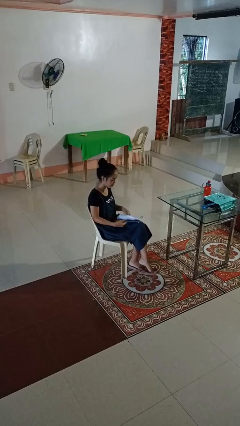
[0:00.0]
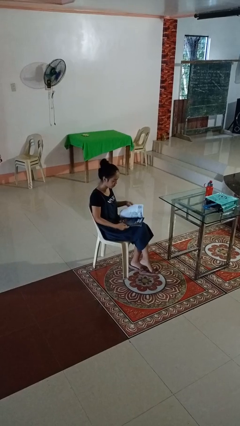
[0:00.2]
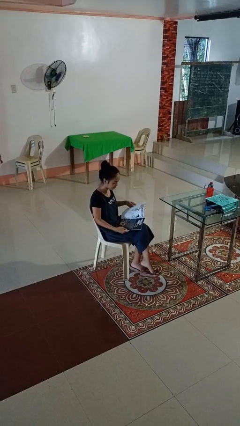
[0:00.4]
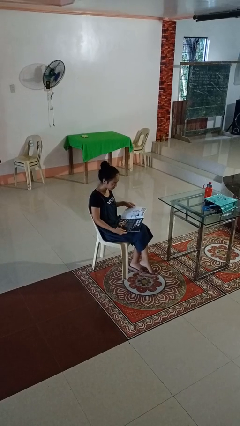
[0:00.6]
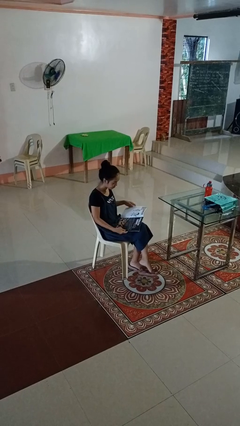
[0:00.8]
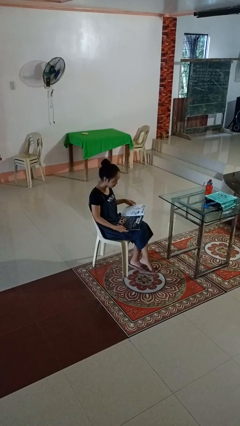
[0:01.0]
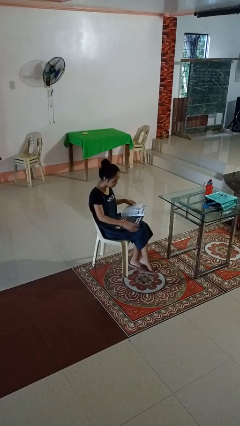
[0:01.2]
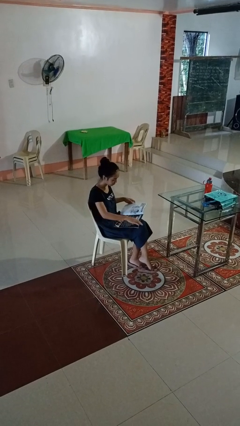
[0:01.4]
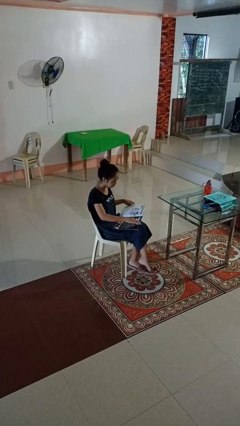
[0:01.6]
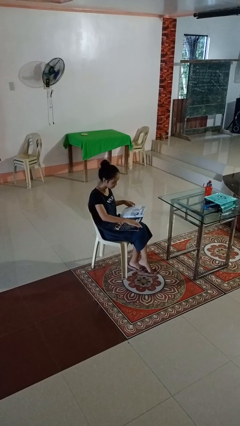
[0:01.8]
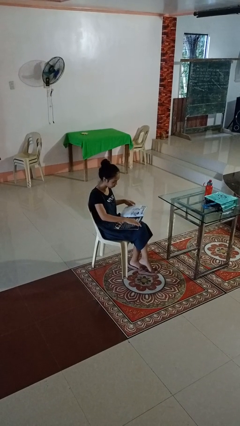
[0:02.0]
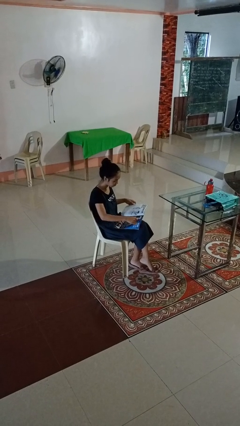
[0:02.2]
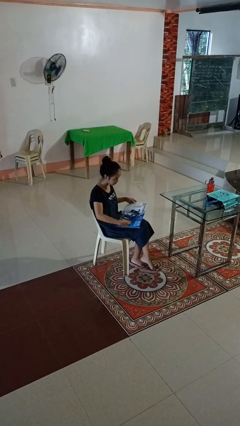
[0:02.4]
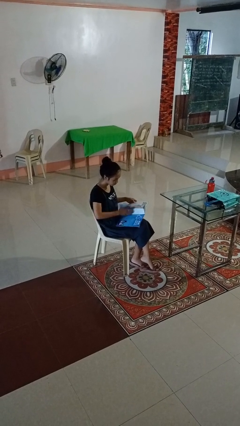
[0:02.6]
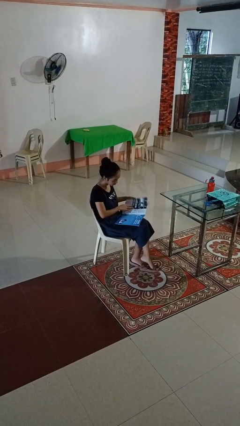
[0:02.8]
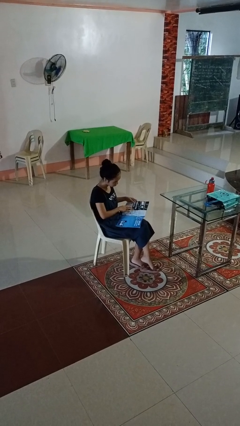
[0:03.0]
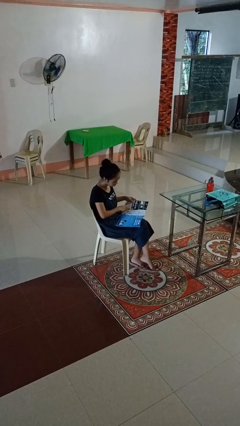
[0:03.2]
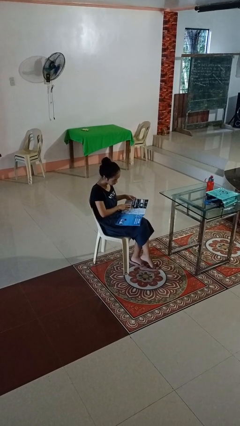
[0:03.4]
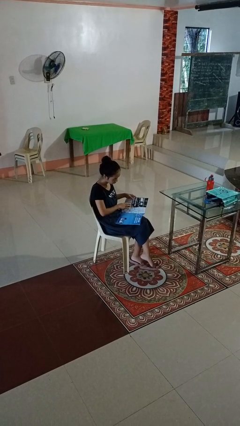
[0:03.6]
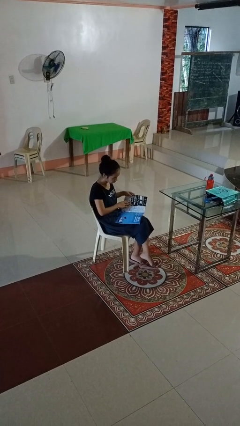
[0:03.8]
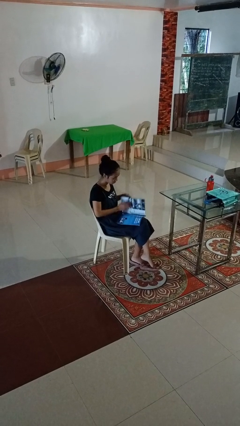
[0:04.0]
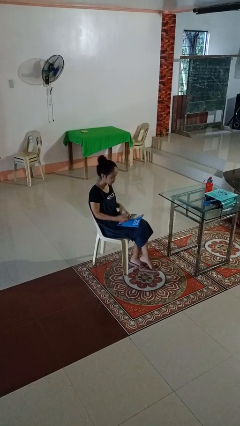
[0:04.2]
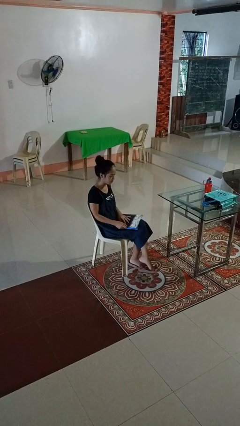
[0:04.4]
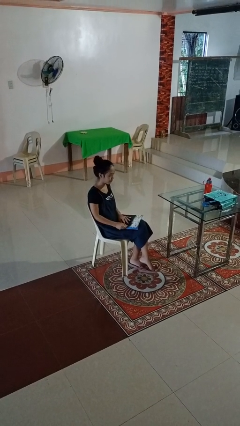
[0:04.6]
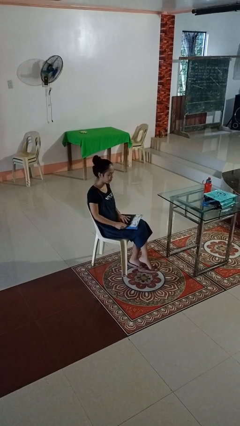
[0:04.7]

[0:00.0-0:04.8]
person reads magazine

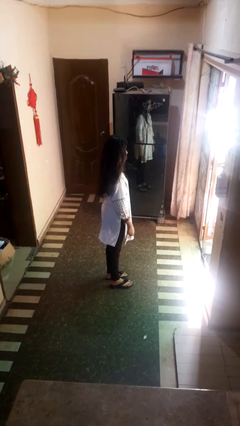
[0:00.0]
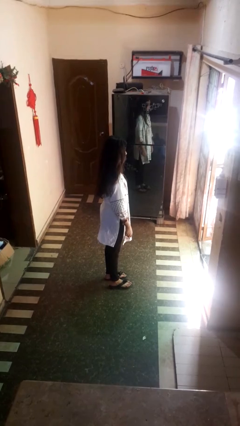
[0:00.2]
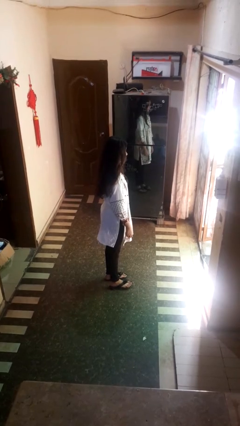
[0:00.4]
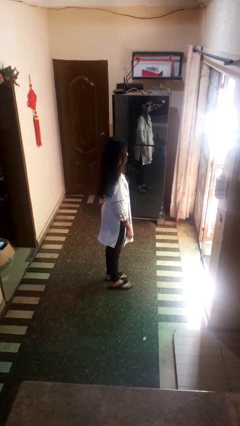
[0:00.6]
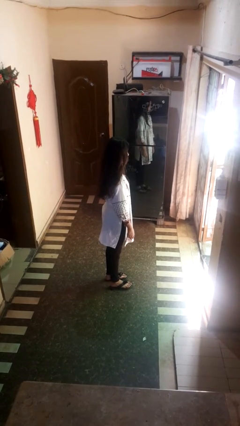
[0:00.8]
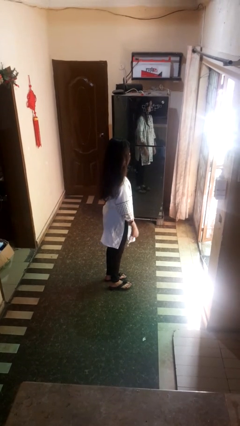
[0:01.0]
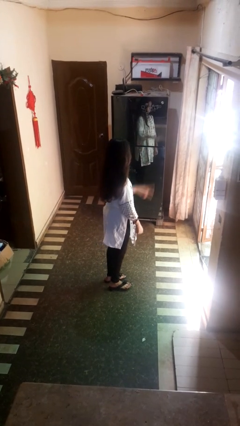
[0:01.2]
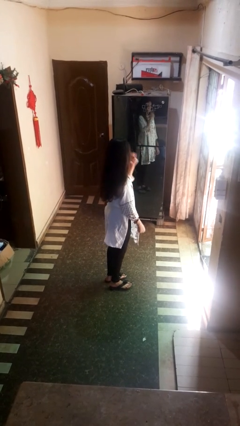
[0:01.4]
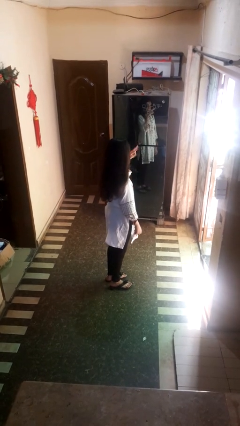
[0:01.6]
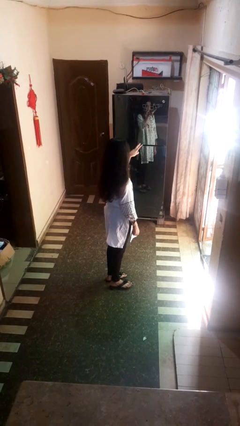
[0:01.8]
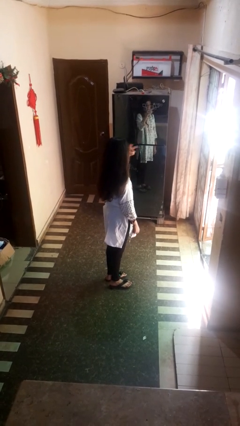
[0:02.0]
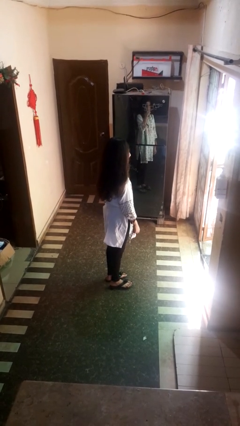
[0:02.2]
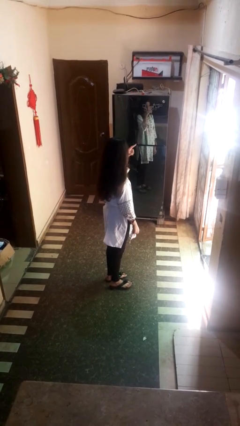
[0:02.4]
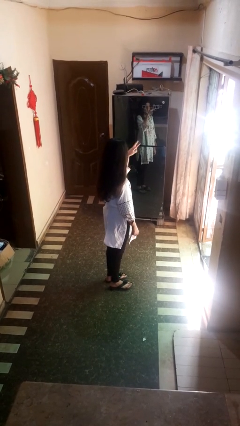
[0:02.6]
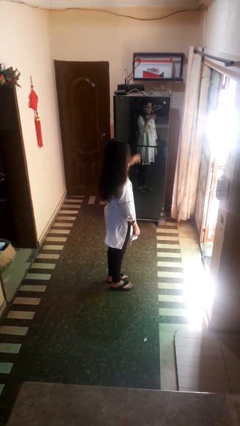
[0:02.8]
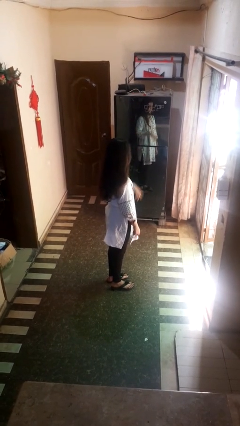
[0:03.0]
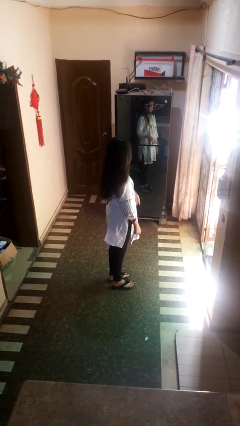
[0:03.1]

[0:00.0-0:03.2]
person gestures watch closely

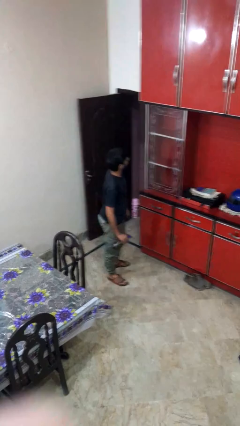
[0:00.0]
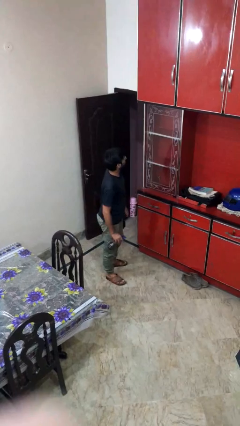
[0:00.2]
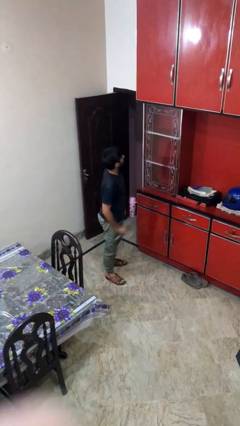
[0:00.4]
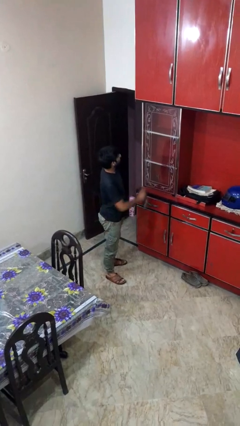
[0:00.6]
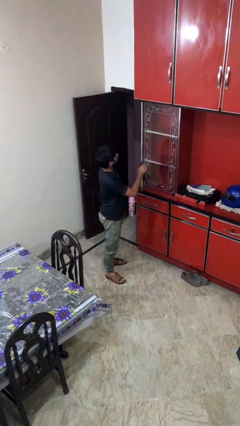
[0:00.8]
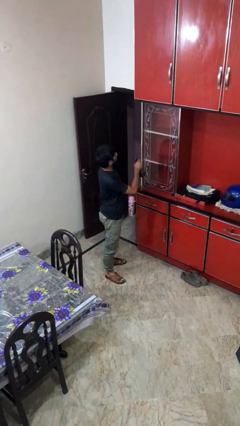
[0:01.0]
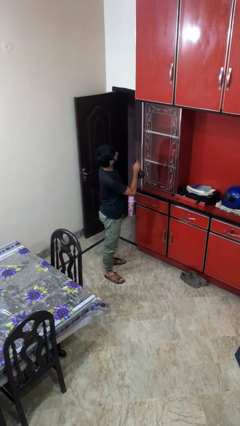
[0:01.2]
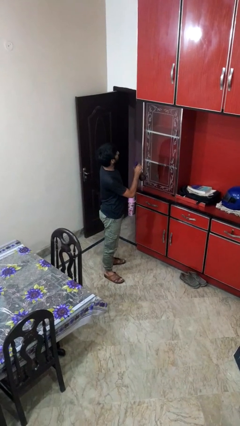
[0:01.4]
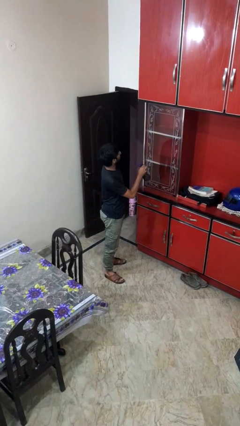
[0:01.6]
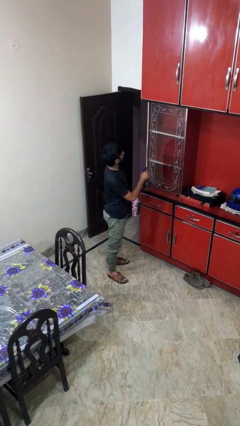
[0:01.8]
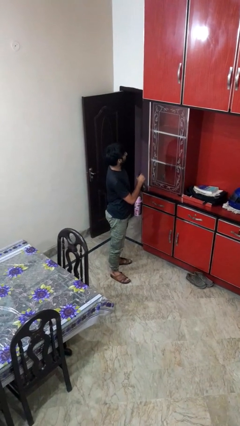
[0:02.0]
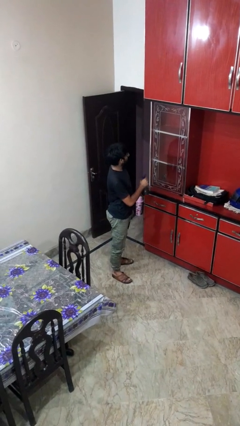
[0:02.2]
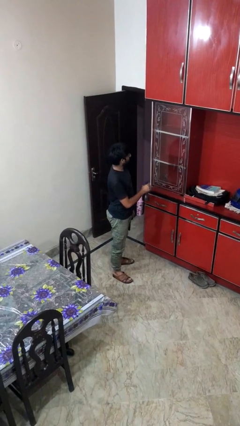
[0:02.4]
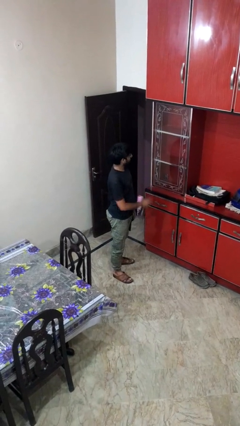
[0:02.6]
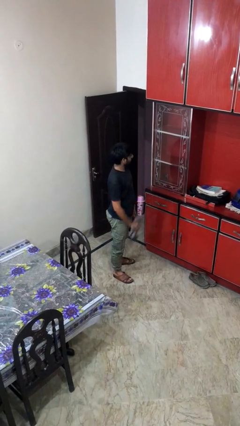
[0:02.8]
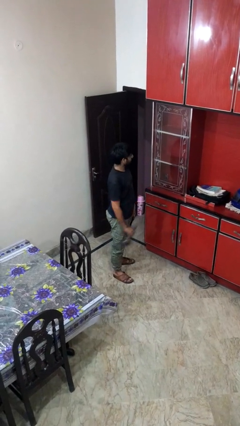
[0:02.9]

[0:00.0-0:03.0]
person sprays from bottle

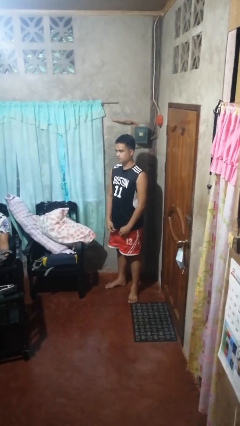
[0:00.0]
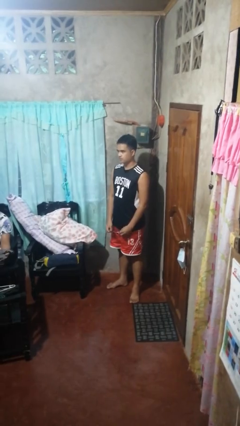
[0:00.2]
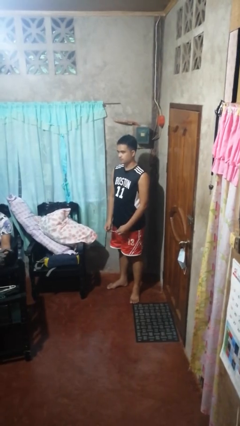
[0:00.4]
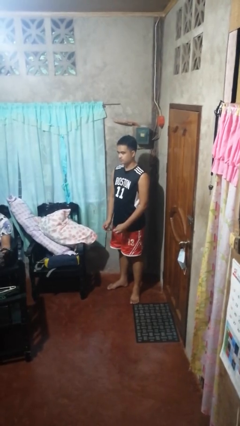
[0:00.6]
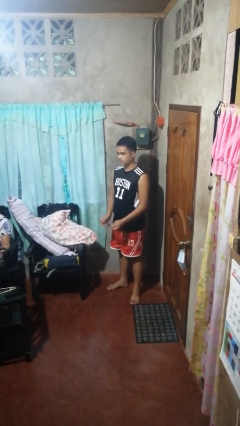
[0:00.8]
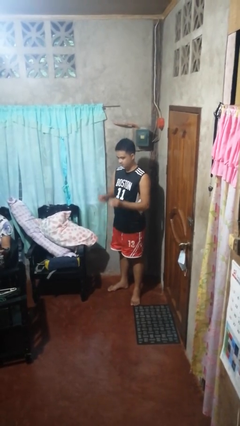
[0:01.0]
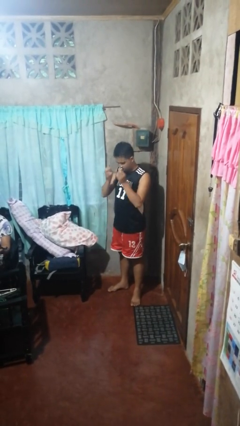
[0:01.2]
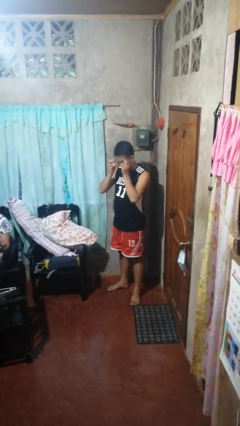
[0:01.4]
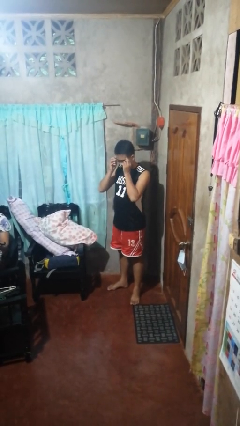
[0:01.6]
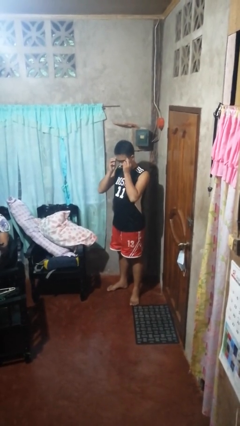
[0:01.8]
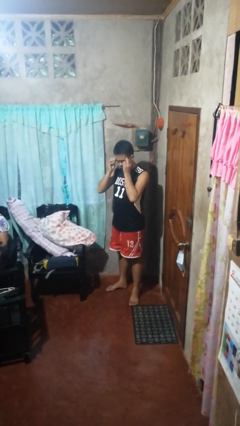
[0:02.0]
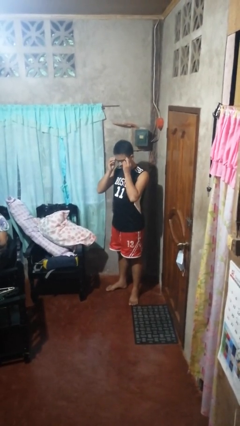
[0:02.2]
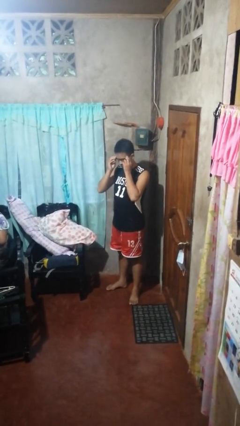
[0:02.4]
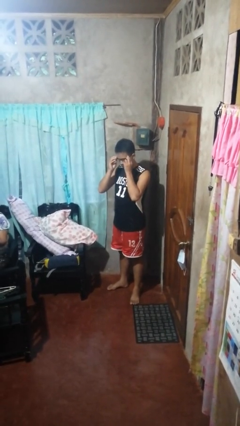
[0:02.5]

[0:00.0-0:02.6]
person puts on glasses

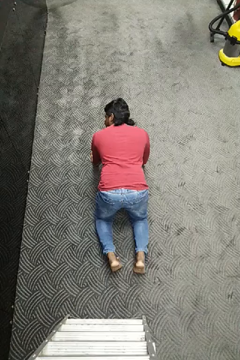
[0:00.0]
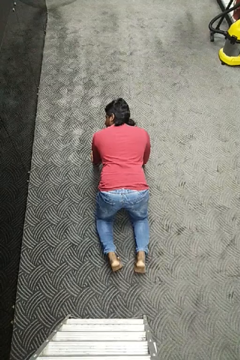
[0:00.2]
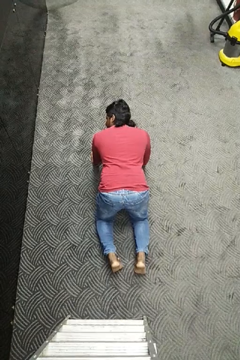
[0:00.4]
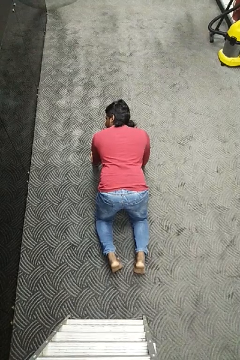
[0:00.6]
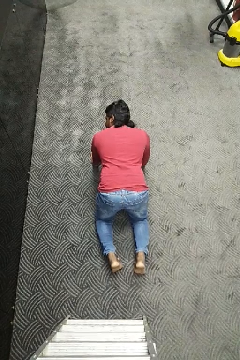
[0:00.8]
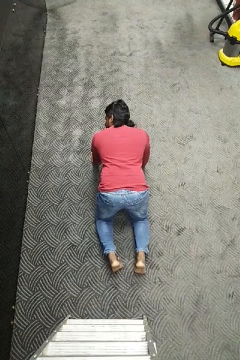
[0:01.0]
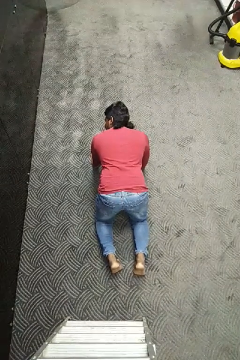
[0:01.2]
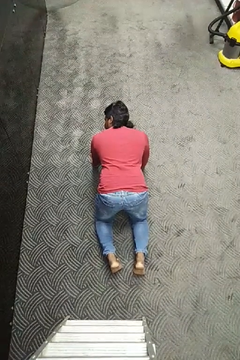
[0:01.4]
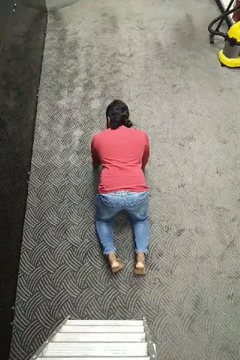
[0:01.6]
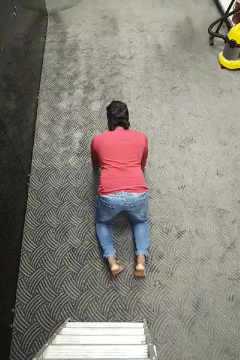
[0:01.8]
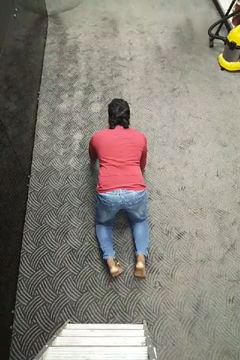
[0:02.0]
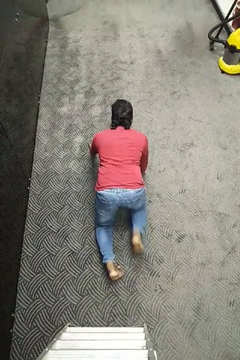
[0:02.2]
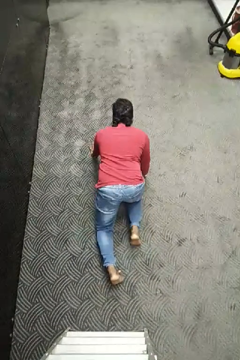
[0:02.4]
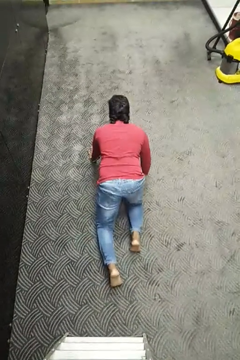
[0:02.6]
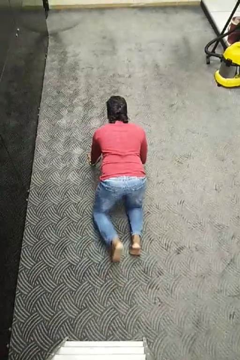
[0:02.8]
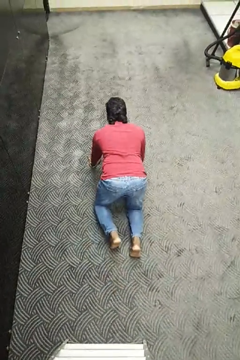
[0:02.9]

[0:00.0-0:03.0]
person crawls

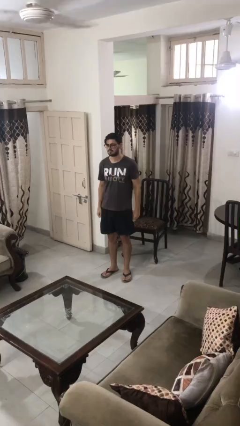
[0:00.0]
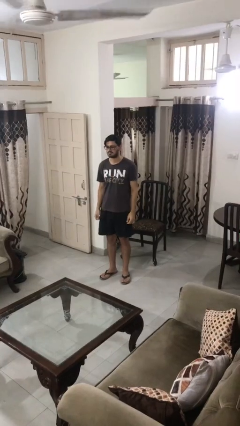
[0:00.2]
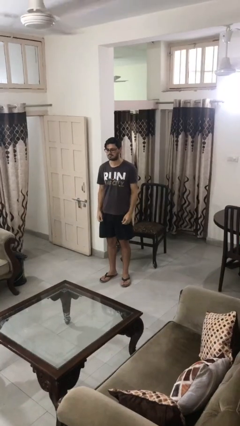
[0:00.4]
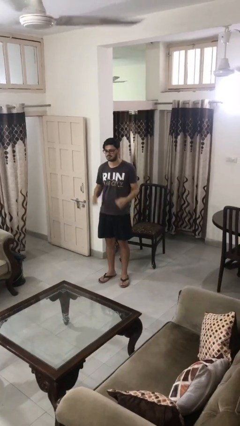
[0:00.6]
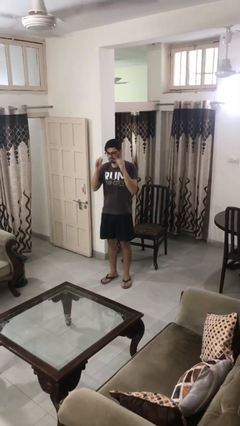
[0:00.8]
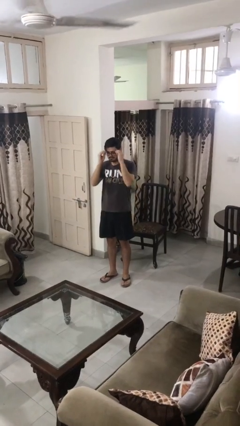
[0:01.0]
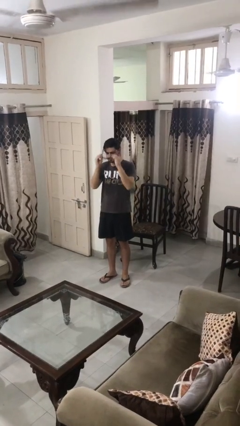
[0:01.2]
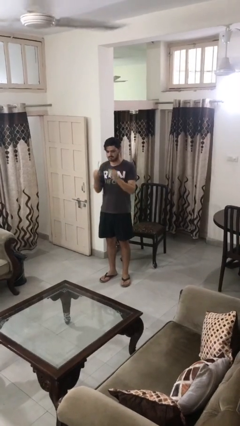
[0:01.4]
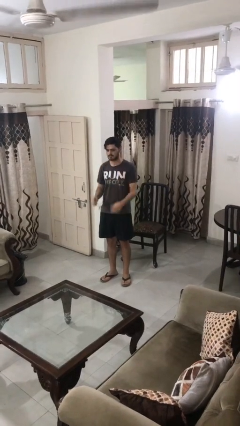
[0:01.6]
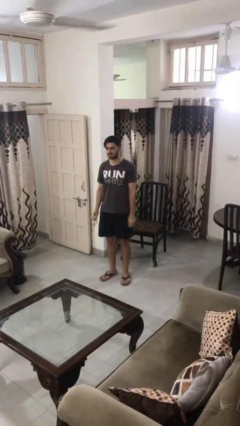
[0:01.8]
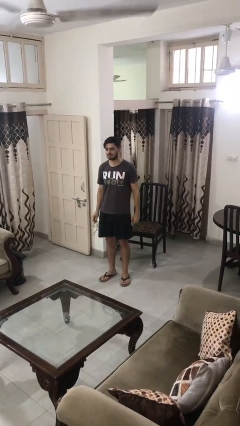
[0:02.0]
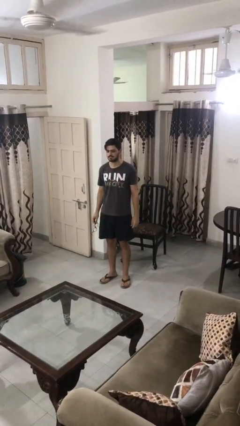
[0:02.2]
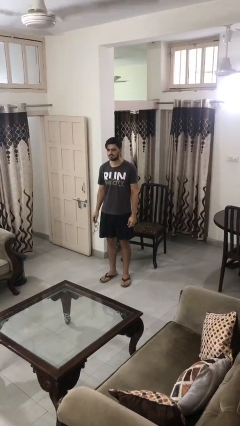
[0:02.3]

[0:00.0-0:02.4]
person takes off glasses
